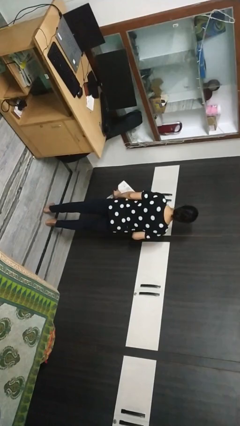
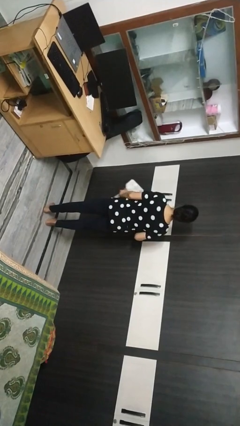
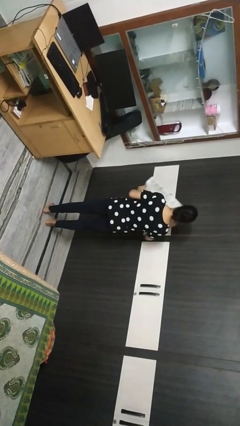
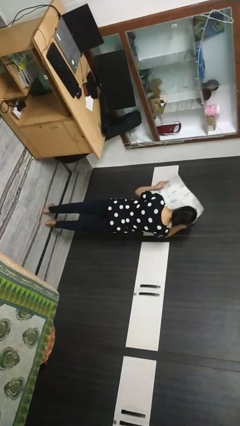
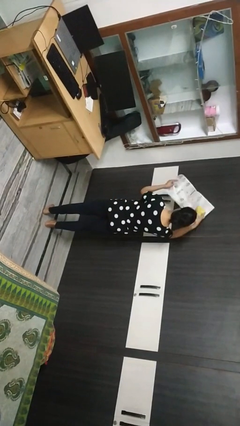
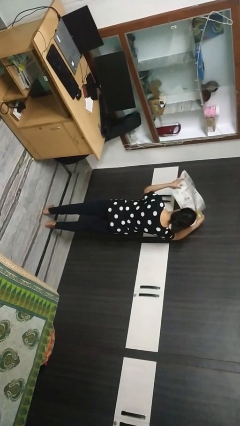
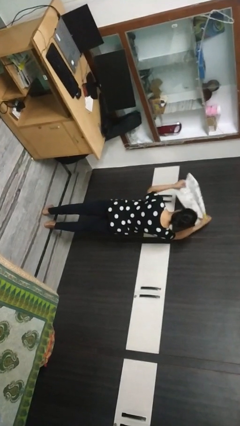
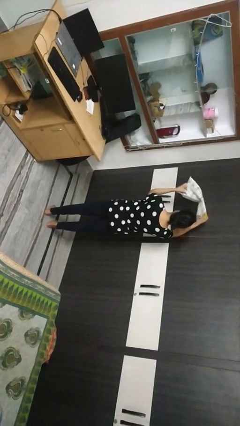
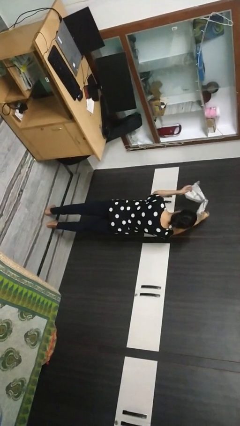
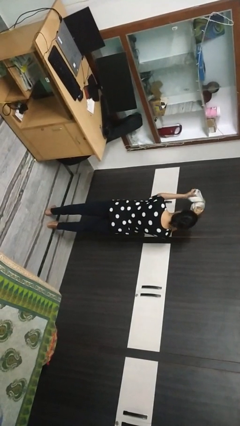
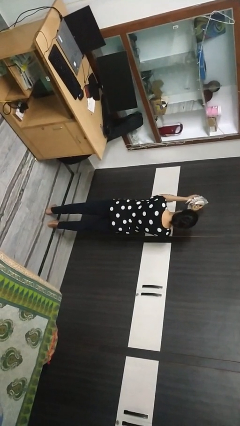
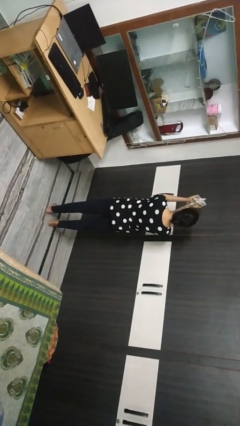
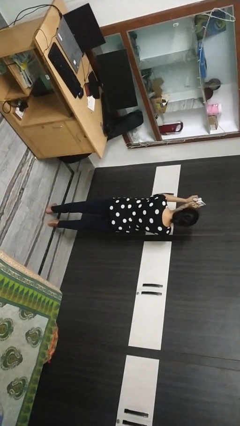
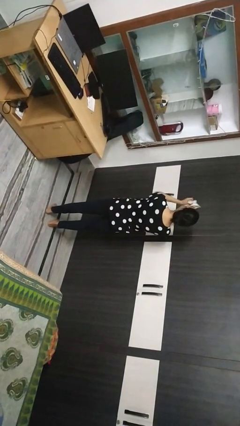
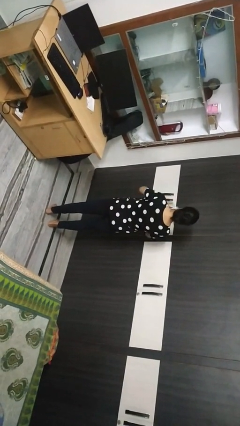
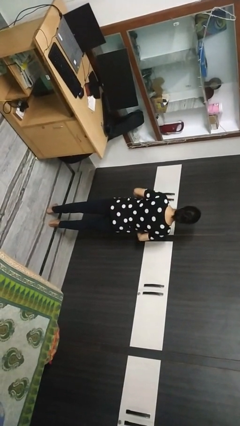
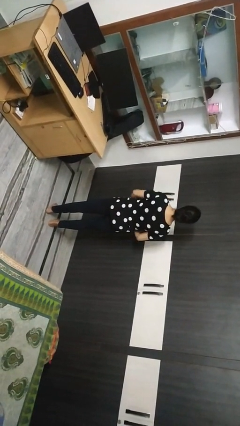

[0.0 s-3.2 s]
person crumples paper

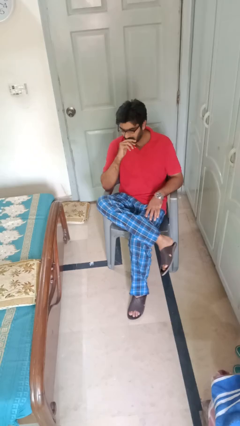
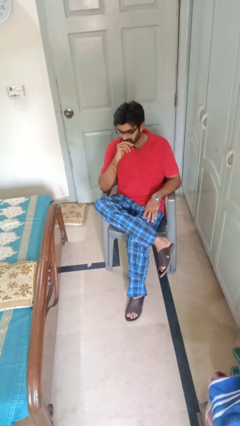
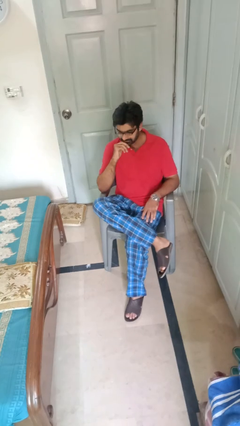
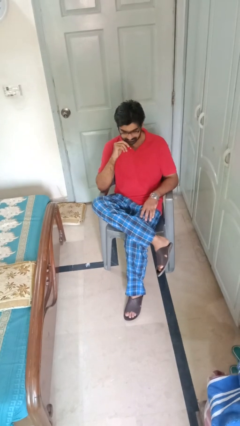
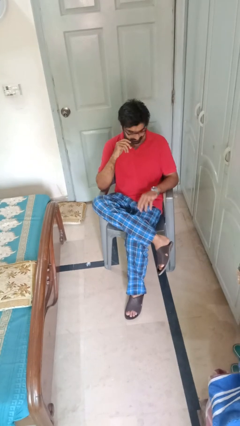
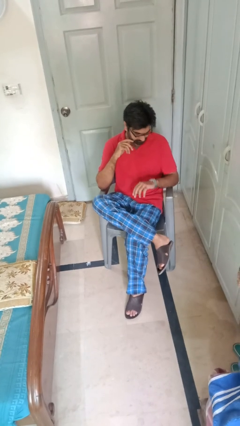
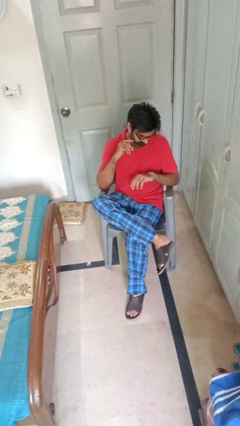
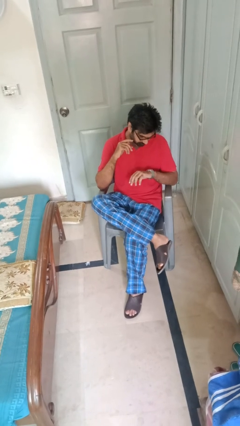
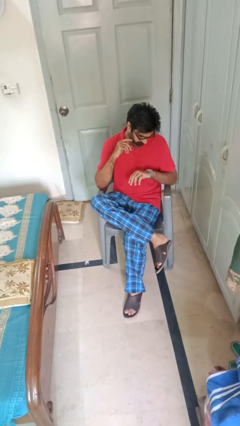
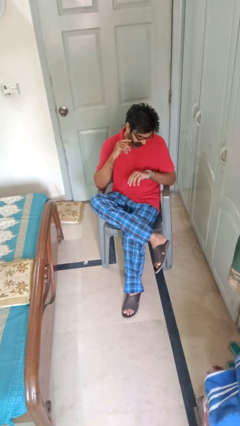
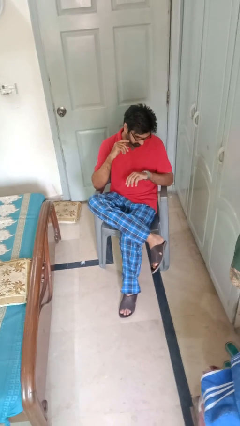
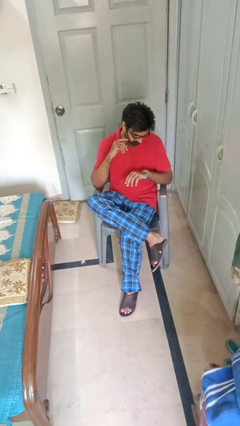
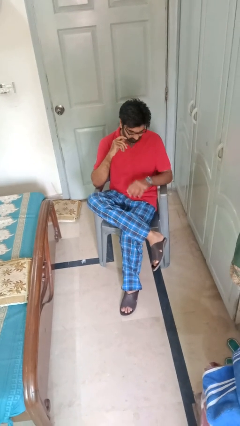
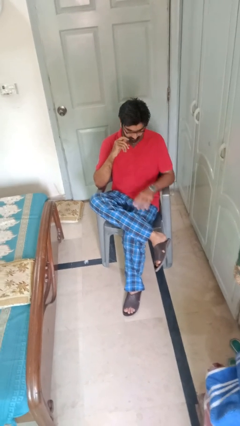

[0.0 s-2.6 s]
person looks at wristwatch

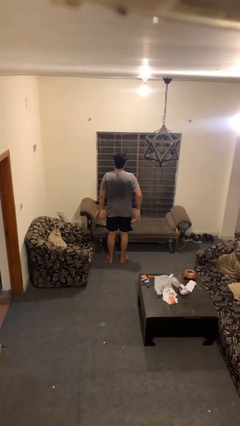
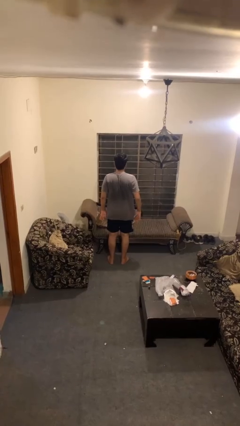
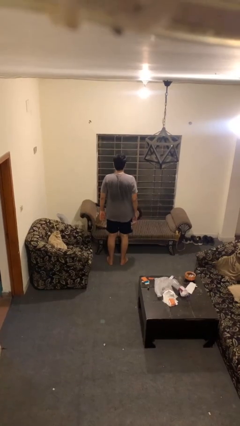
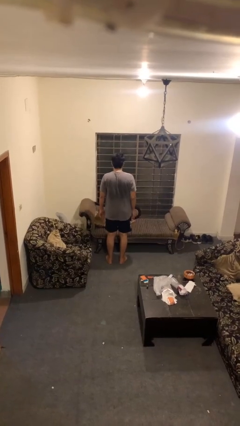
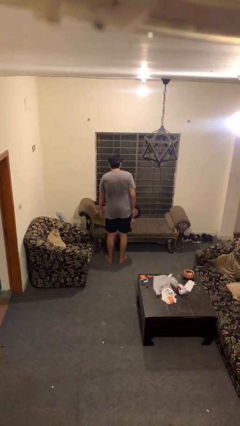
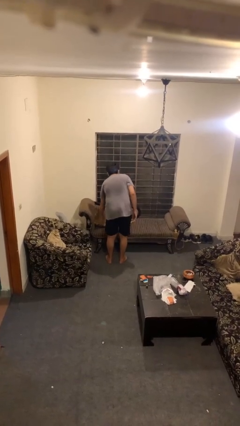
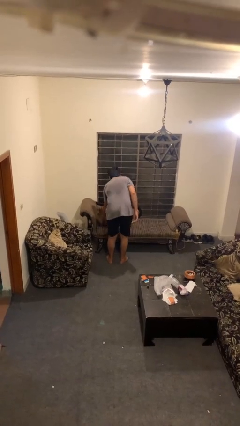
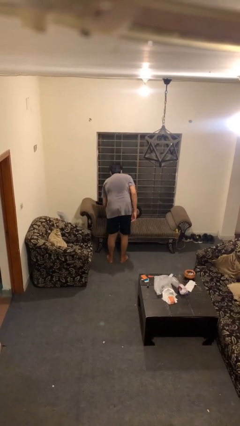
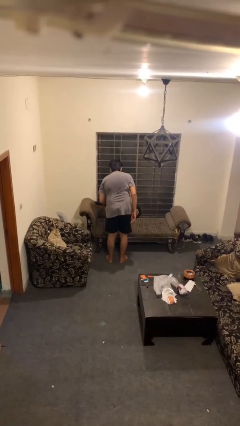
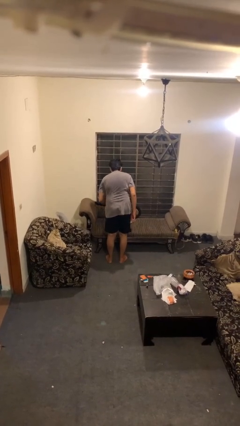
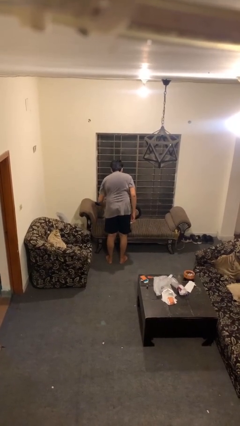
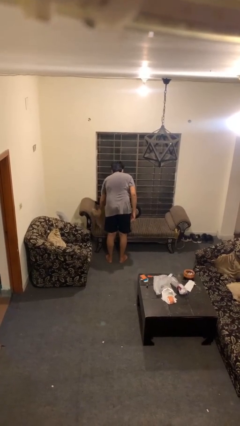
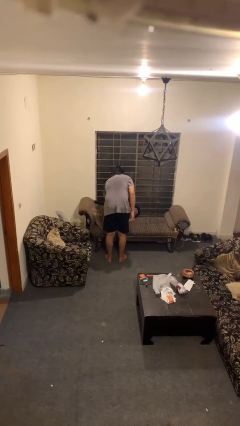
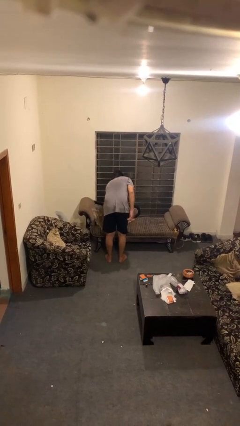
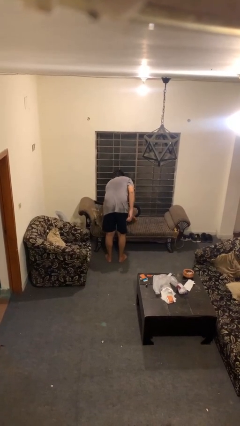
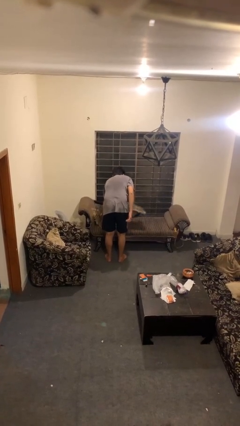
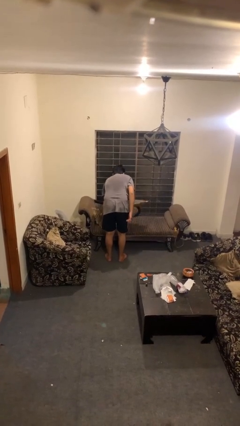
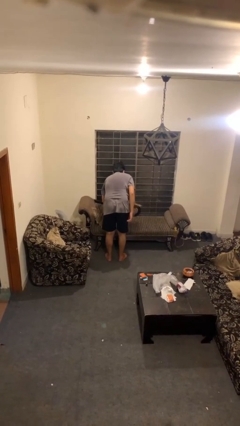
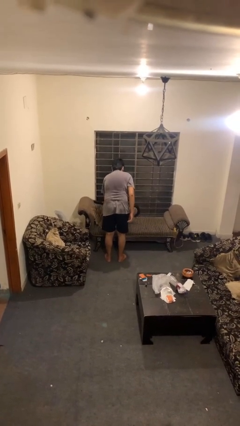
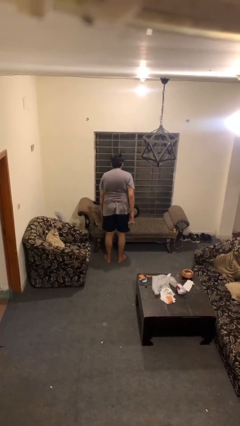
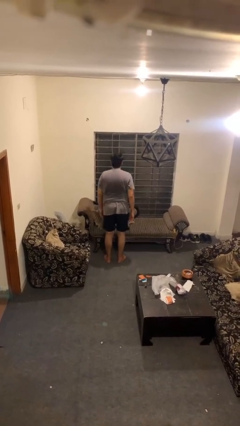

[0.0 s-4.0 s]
person searches in couch

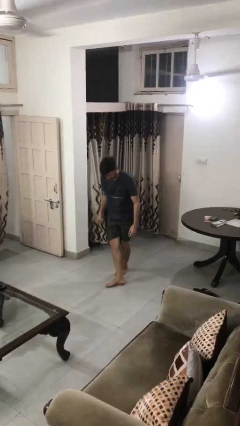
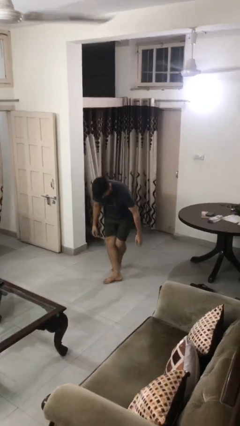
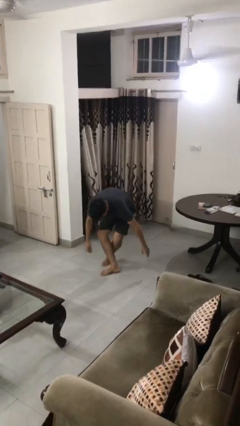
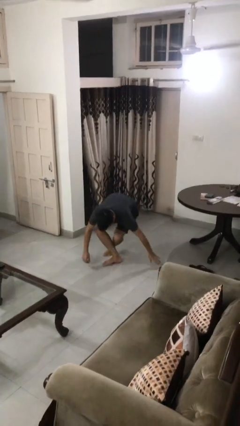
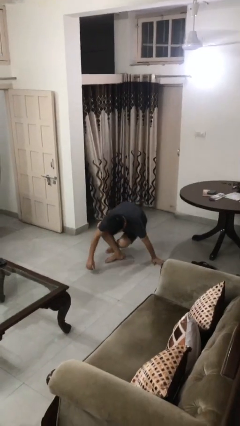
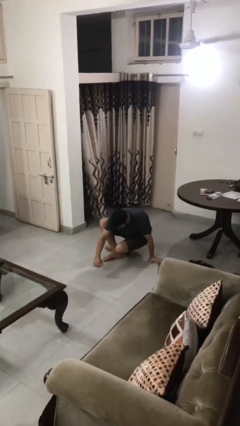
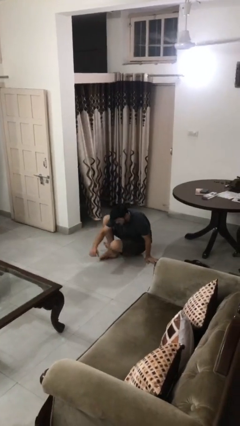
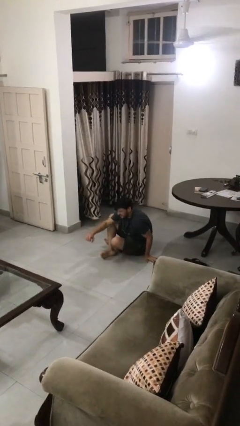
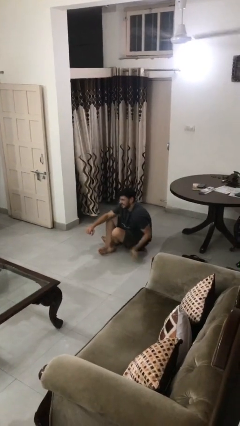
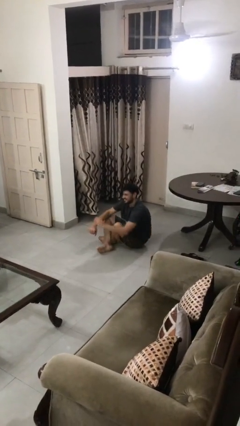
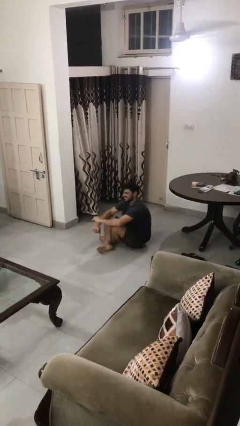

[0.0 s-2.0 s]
person sits crisscross

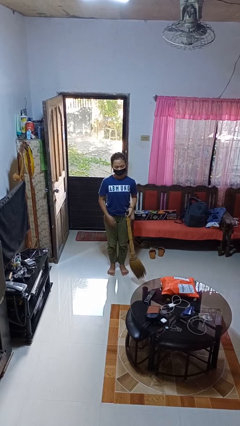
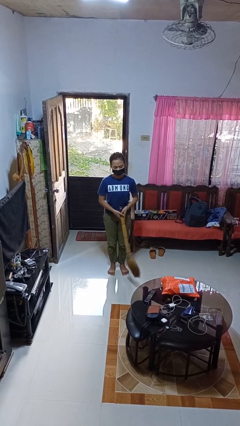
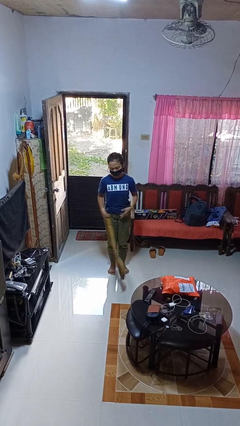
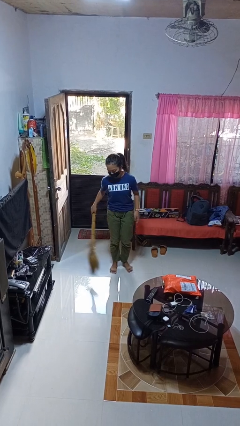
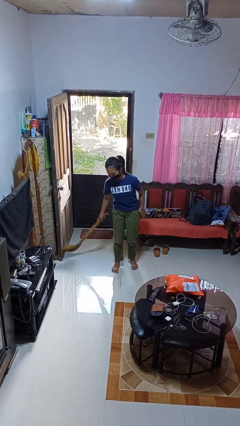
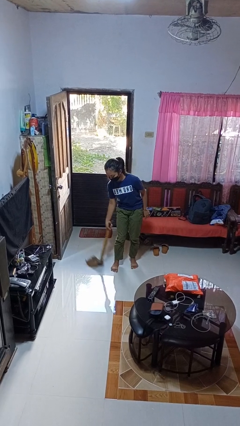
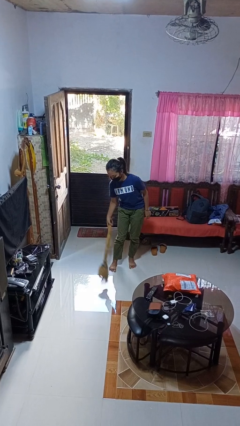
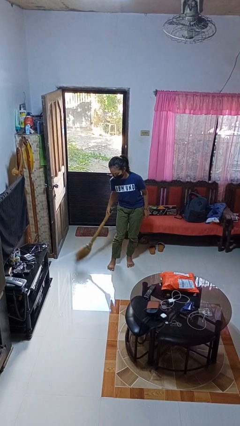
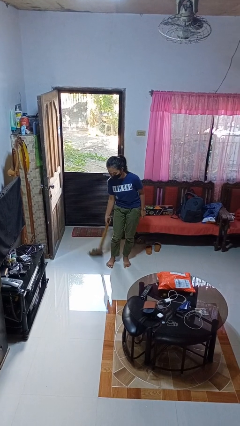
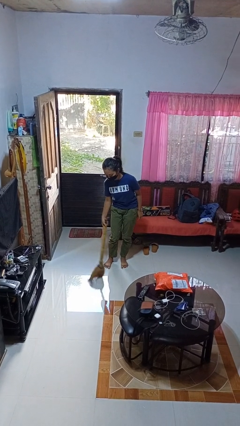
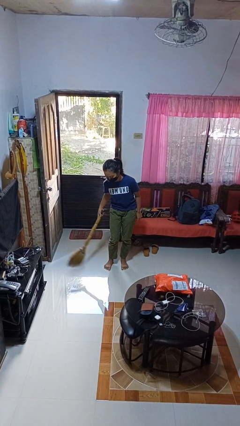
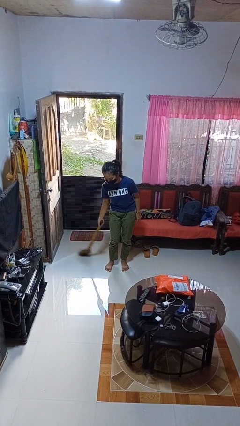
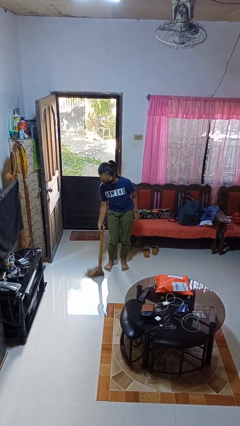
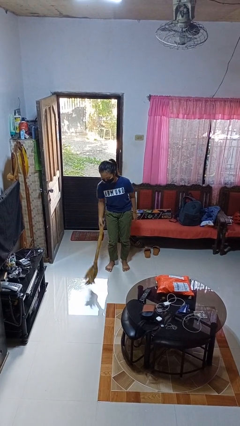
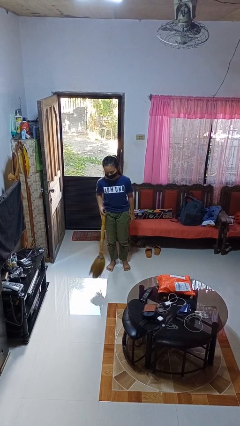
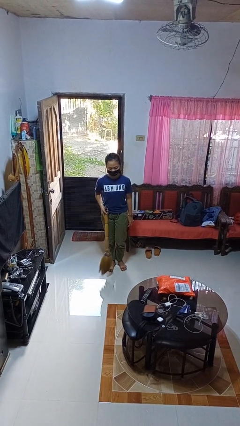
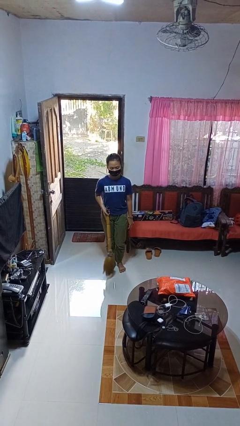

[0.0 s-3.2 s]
person sweeps floor

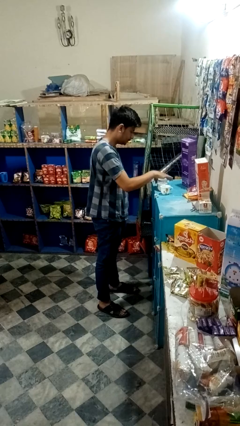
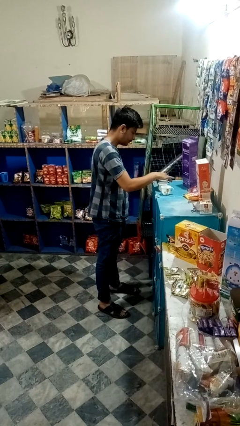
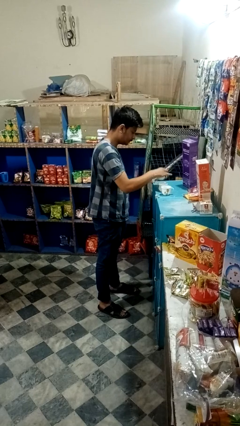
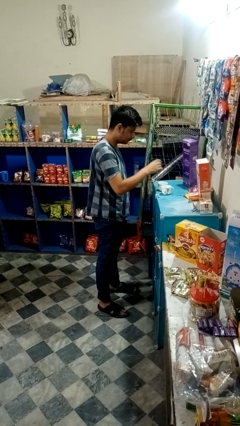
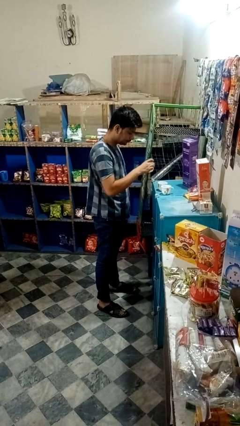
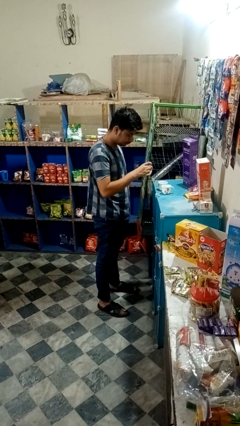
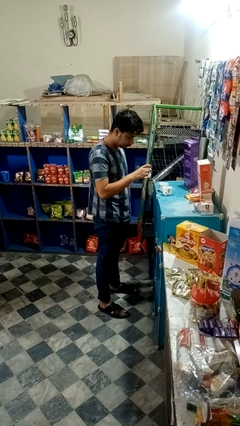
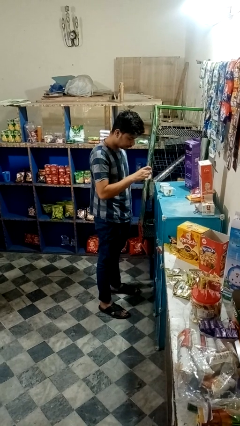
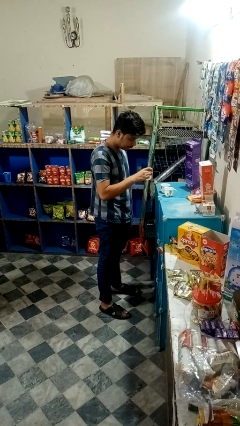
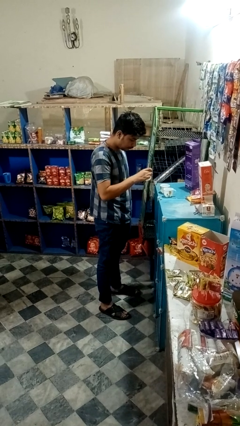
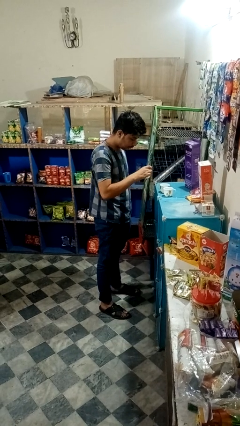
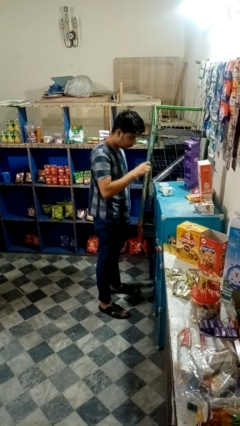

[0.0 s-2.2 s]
person picks up object from table
